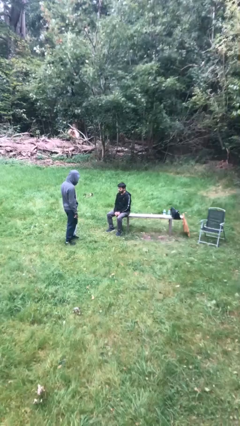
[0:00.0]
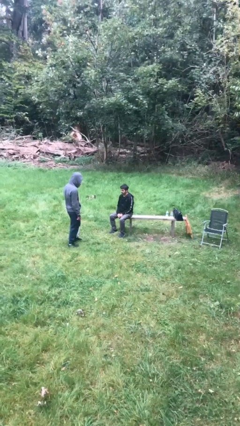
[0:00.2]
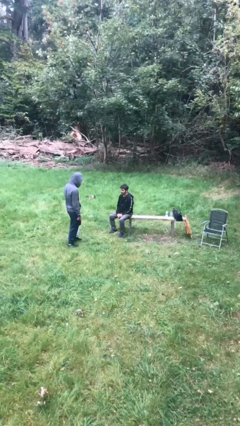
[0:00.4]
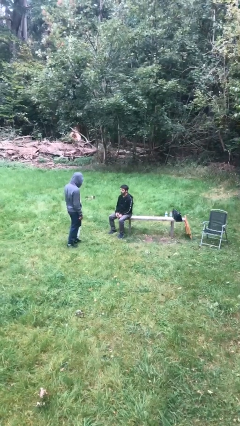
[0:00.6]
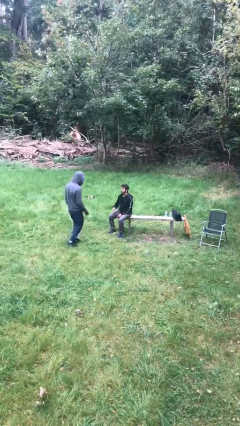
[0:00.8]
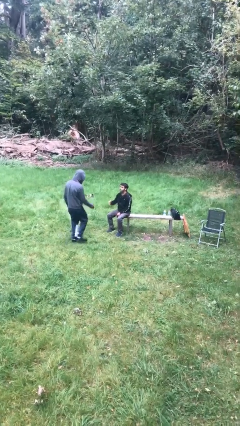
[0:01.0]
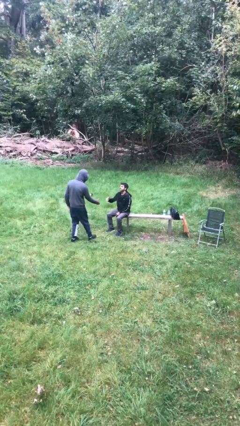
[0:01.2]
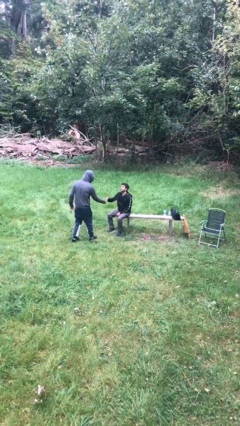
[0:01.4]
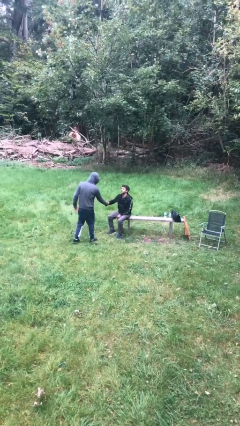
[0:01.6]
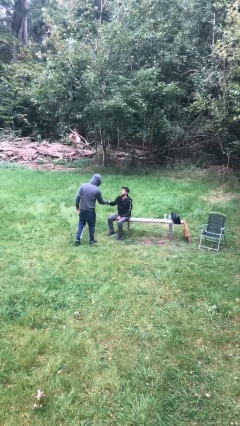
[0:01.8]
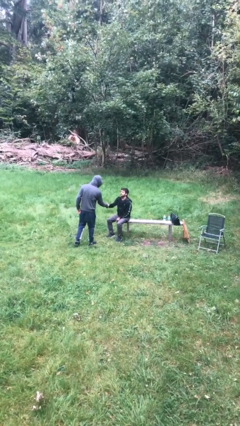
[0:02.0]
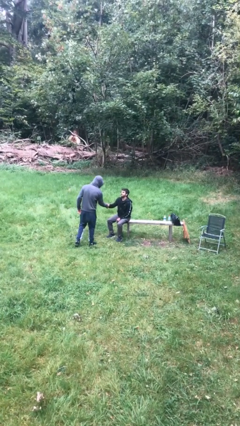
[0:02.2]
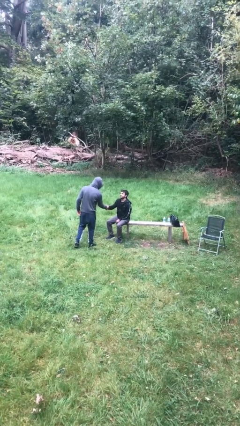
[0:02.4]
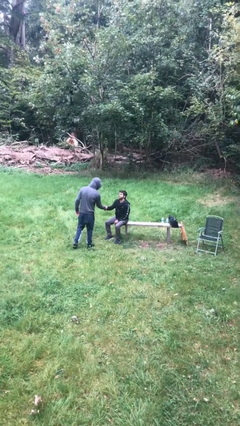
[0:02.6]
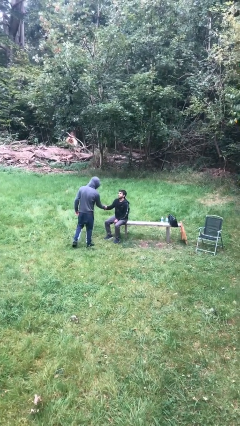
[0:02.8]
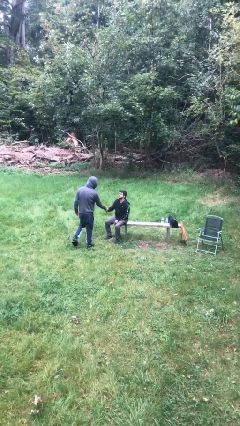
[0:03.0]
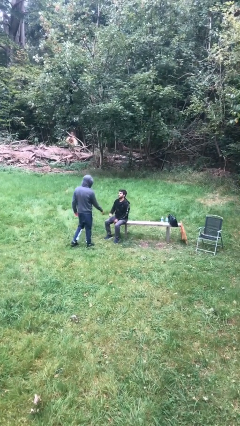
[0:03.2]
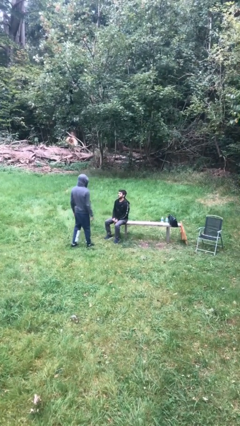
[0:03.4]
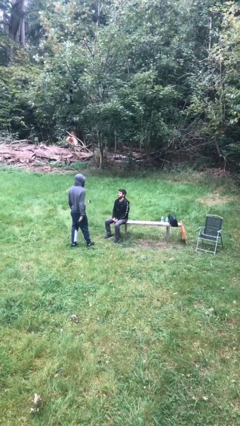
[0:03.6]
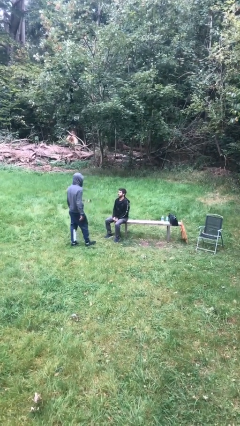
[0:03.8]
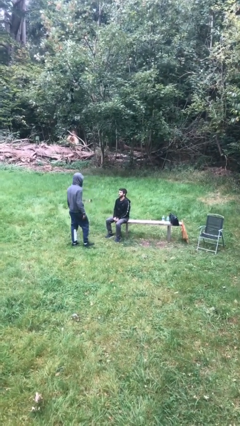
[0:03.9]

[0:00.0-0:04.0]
person shakes hand

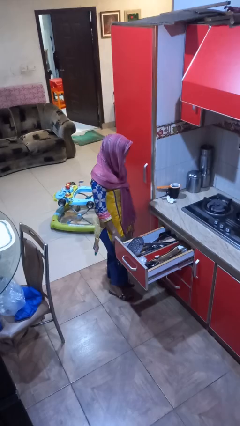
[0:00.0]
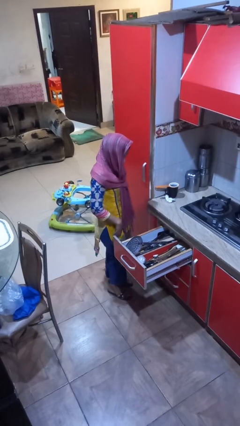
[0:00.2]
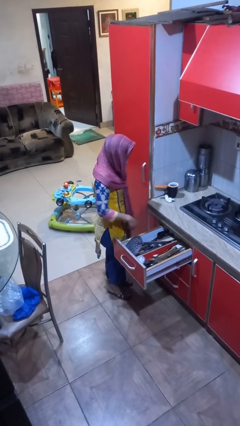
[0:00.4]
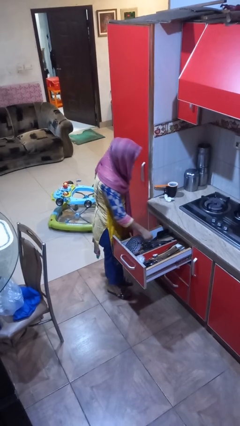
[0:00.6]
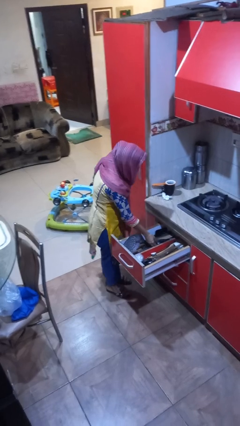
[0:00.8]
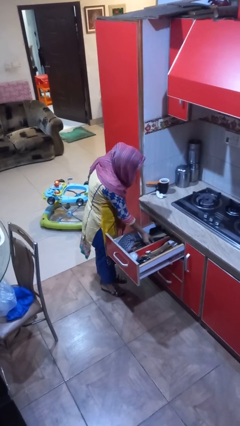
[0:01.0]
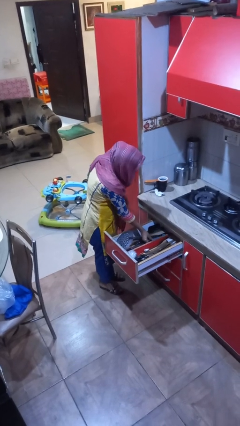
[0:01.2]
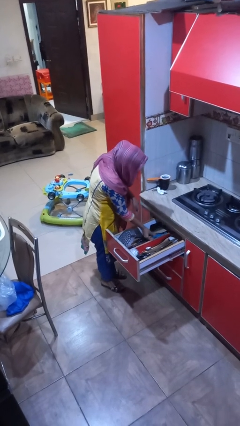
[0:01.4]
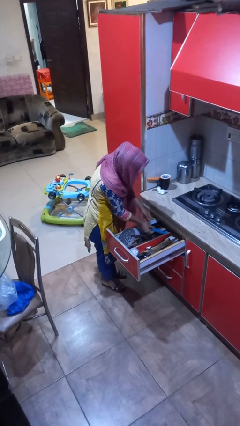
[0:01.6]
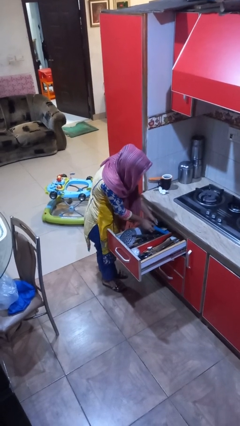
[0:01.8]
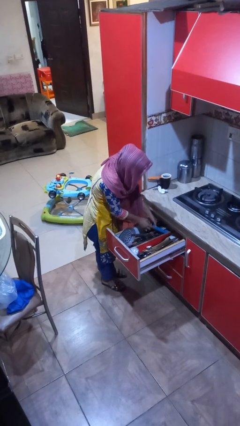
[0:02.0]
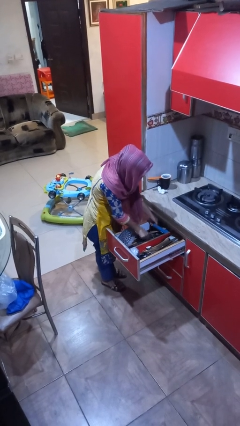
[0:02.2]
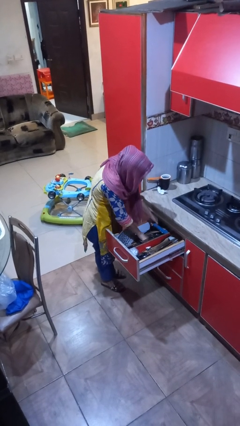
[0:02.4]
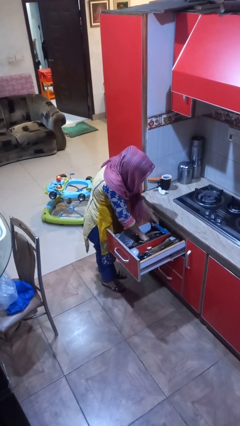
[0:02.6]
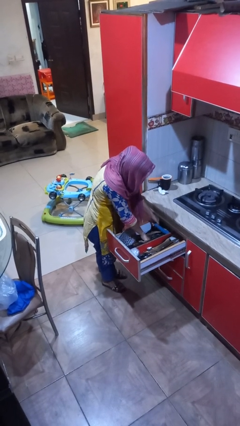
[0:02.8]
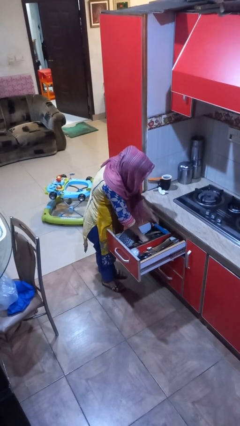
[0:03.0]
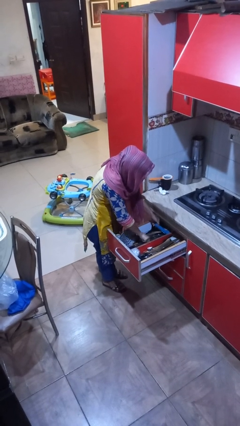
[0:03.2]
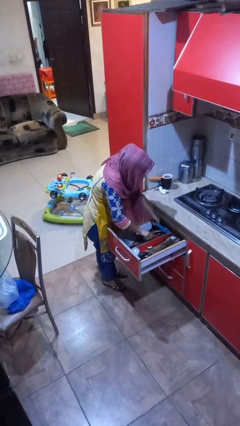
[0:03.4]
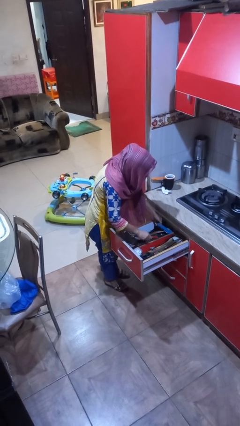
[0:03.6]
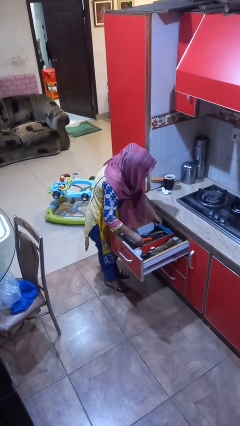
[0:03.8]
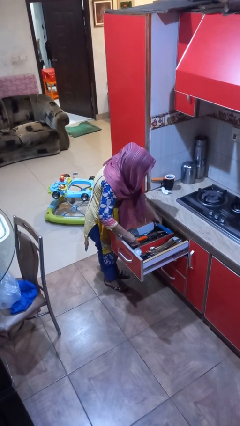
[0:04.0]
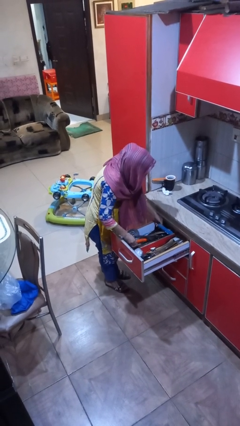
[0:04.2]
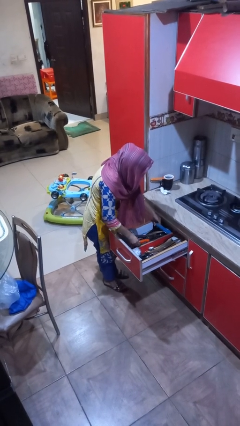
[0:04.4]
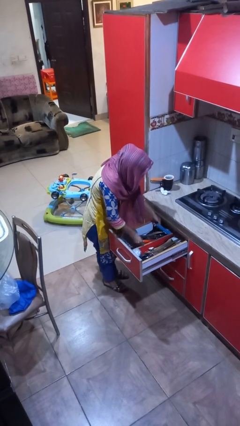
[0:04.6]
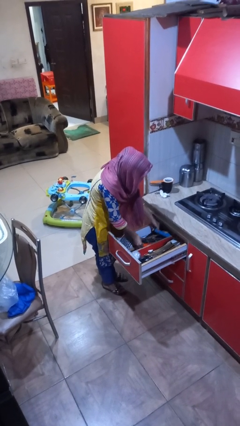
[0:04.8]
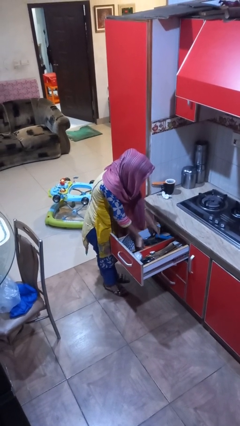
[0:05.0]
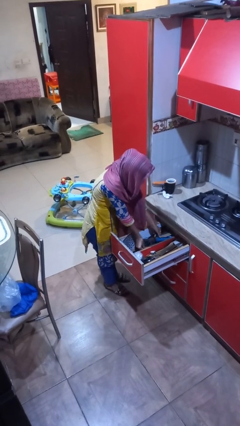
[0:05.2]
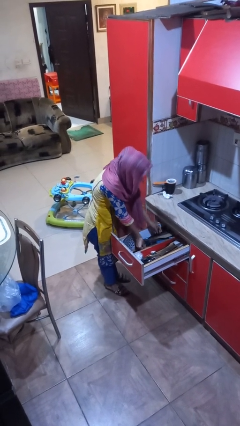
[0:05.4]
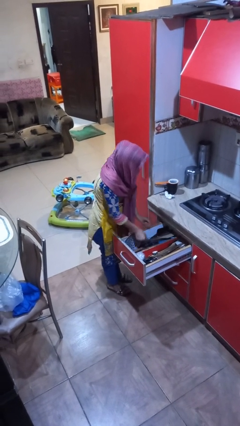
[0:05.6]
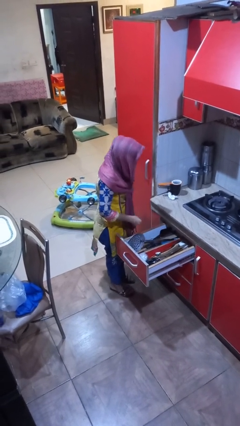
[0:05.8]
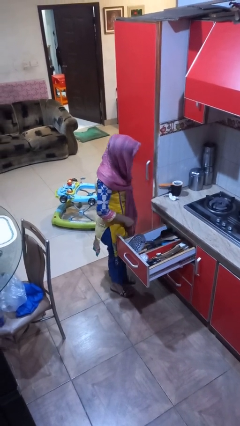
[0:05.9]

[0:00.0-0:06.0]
person searches in kitchen drawer

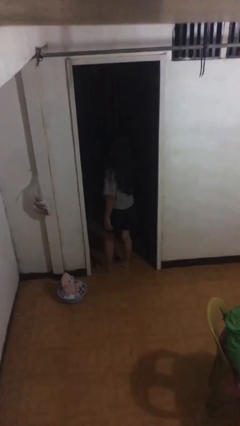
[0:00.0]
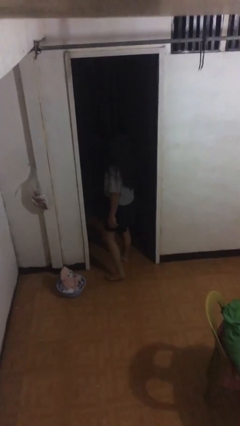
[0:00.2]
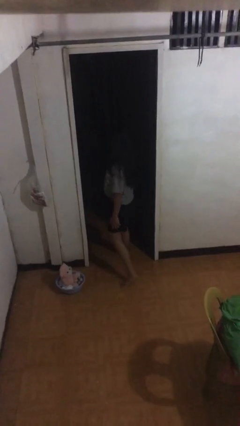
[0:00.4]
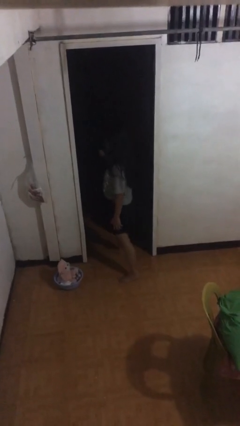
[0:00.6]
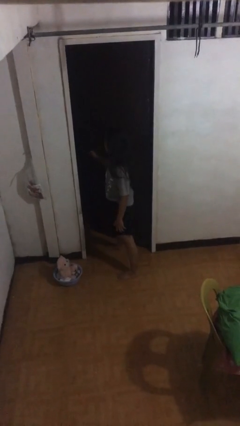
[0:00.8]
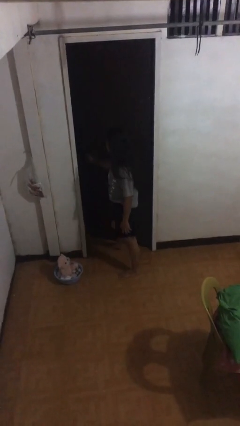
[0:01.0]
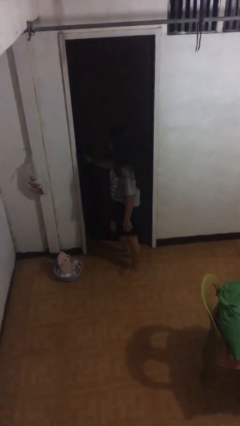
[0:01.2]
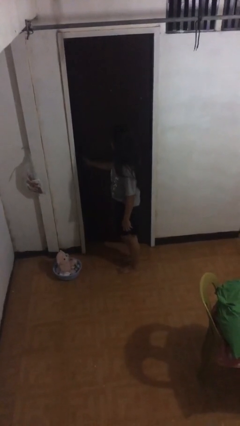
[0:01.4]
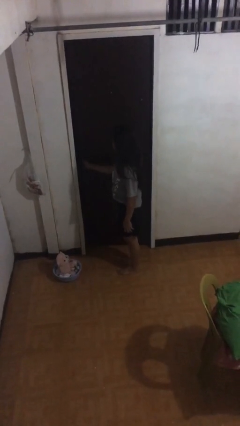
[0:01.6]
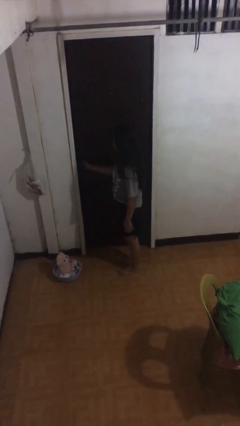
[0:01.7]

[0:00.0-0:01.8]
person closes facility door

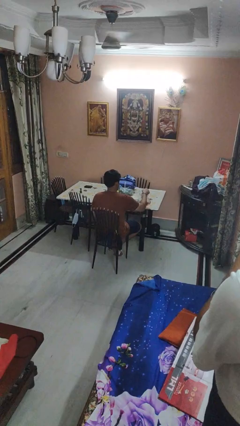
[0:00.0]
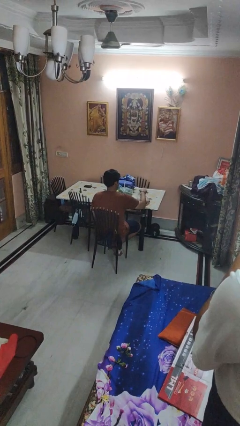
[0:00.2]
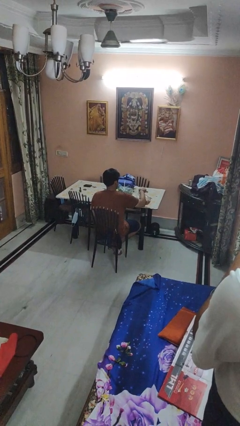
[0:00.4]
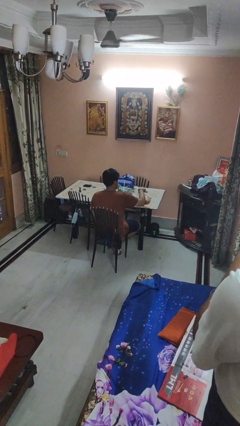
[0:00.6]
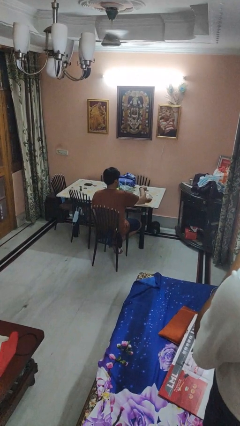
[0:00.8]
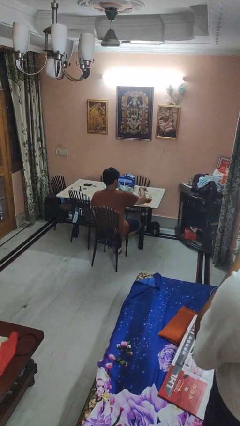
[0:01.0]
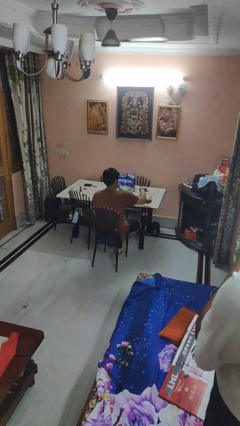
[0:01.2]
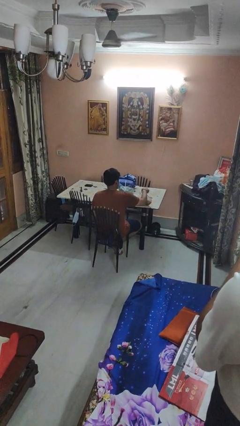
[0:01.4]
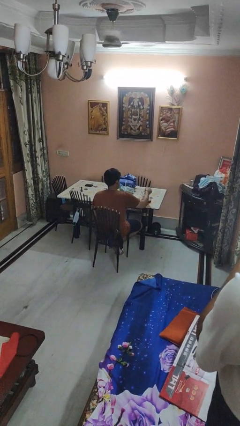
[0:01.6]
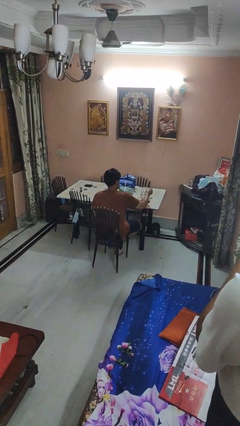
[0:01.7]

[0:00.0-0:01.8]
person pours coffee into mug

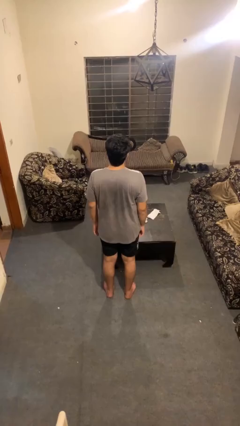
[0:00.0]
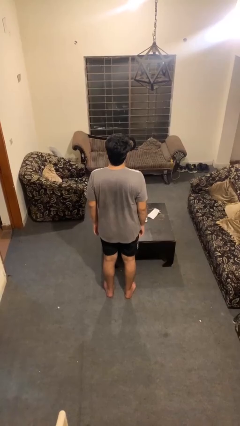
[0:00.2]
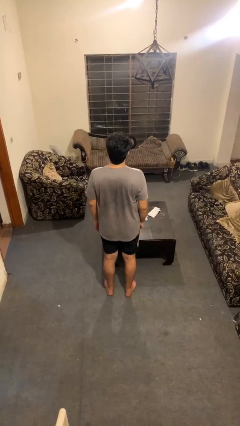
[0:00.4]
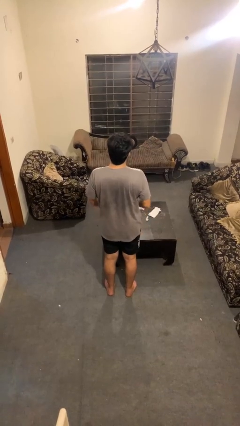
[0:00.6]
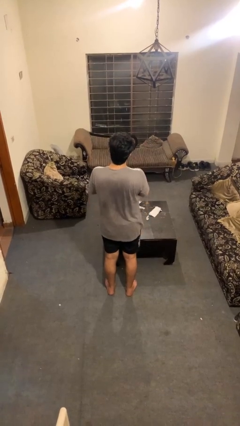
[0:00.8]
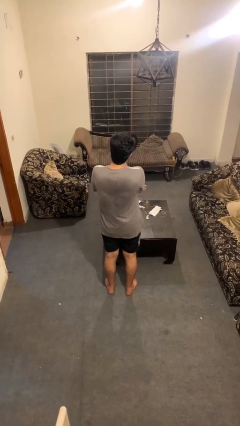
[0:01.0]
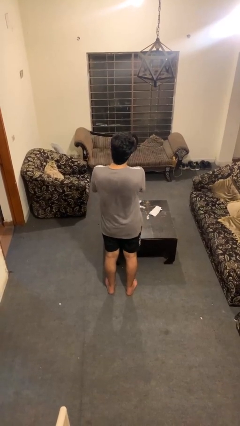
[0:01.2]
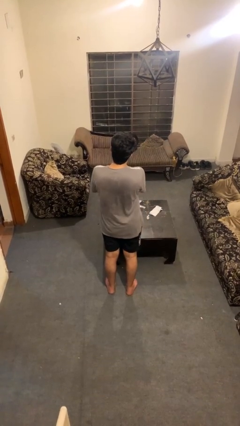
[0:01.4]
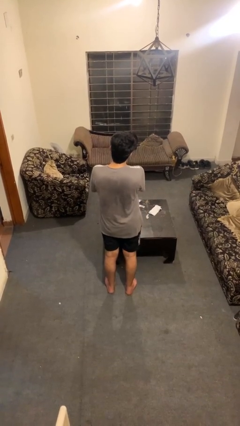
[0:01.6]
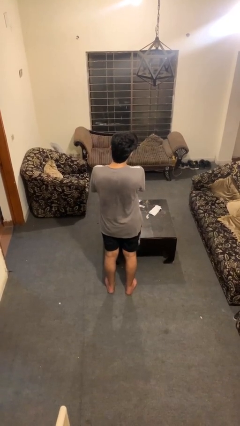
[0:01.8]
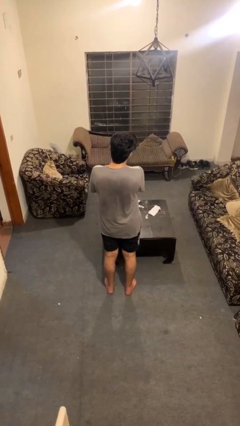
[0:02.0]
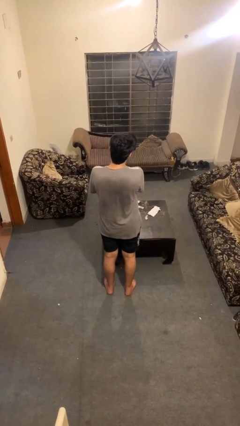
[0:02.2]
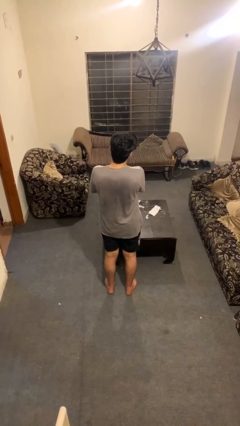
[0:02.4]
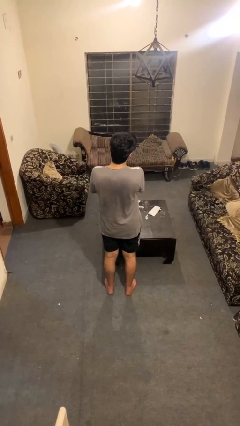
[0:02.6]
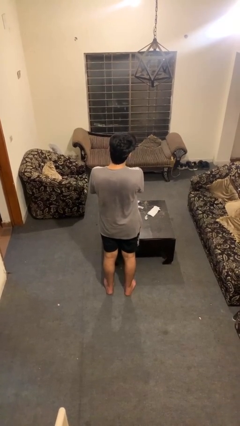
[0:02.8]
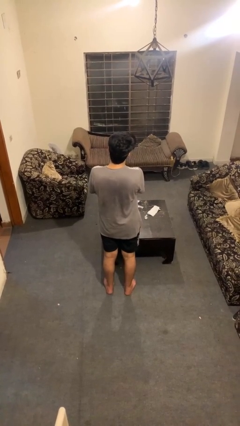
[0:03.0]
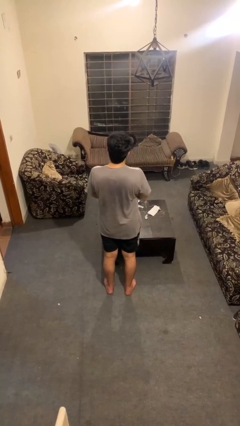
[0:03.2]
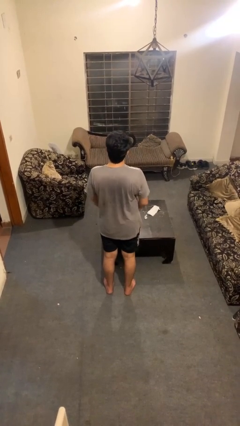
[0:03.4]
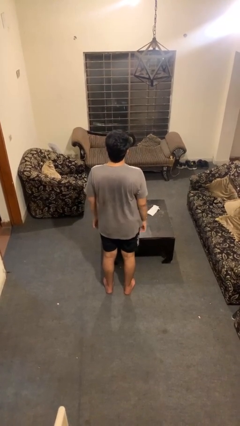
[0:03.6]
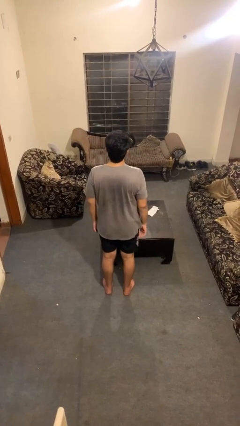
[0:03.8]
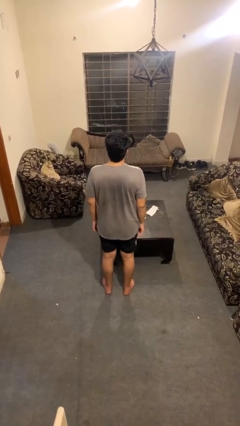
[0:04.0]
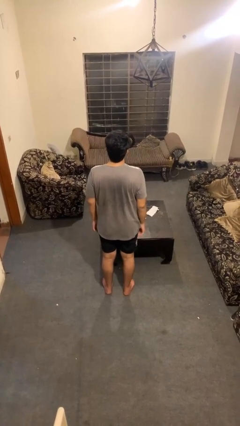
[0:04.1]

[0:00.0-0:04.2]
person strokes chin
